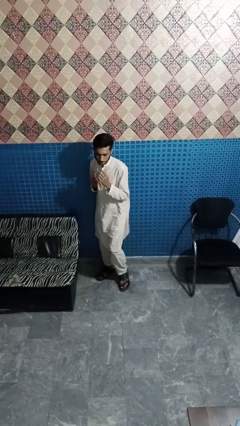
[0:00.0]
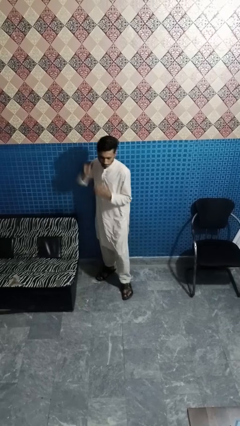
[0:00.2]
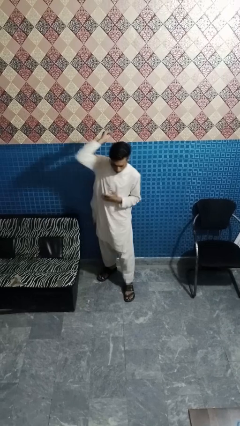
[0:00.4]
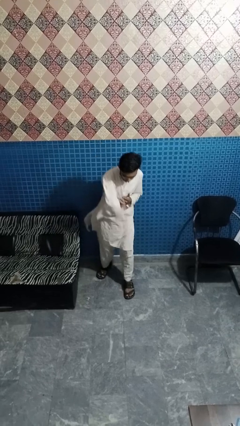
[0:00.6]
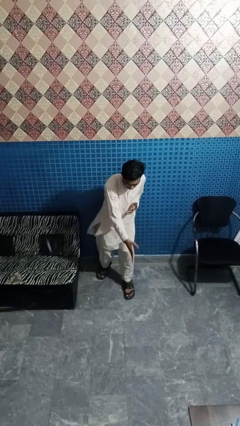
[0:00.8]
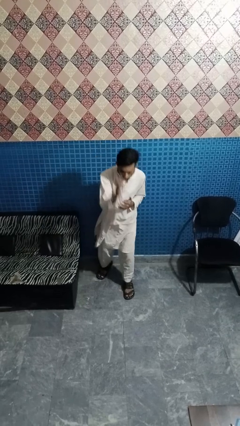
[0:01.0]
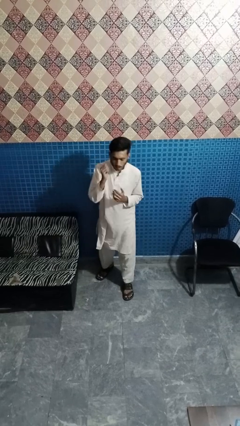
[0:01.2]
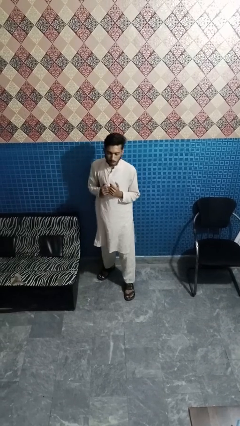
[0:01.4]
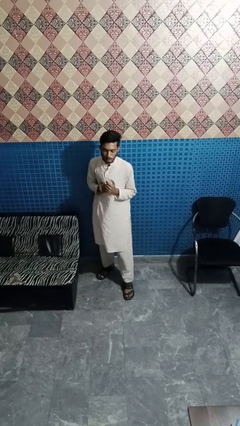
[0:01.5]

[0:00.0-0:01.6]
person karate chop

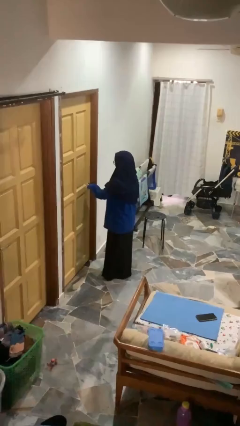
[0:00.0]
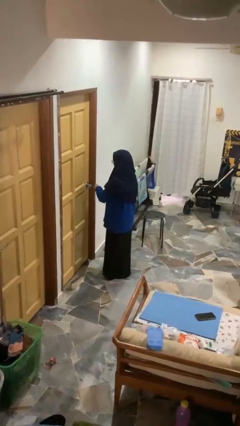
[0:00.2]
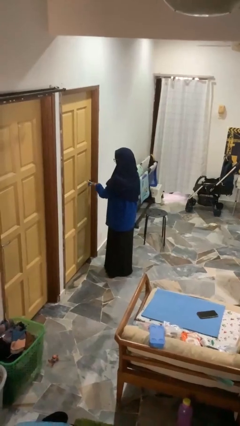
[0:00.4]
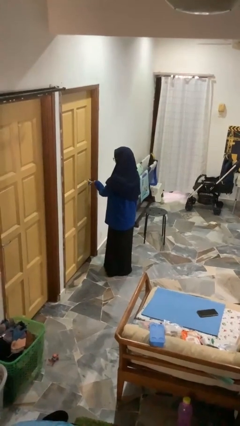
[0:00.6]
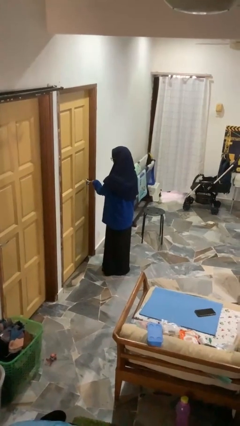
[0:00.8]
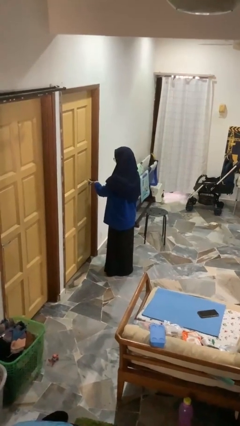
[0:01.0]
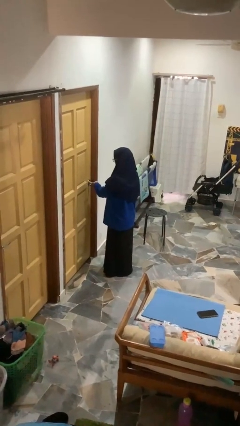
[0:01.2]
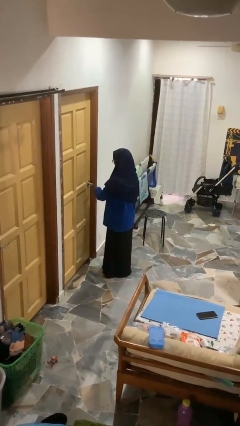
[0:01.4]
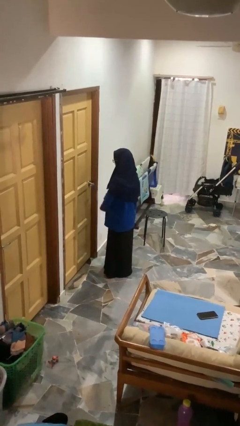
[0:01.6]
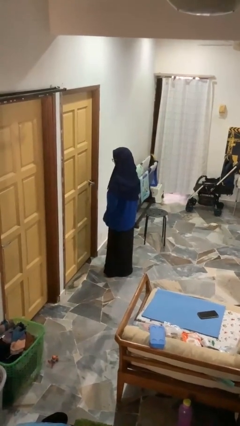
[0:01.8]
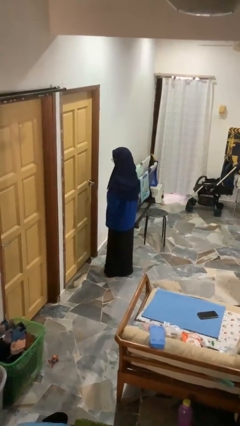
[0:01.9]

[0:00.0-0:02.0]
person locks door with keys

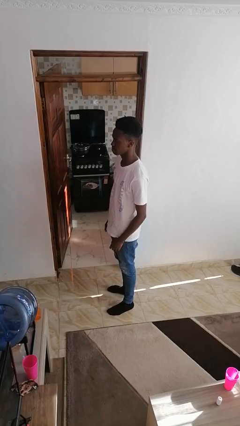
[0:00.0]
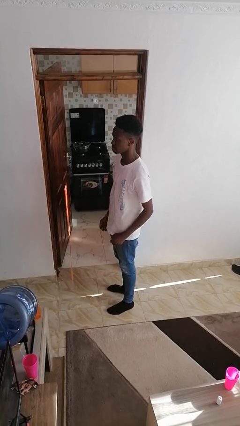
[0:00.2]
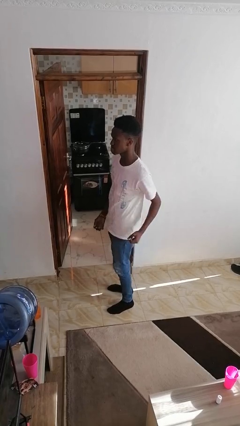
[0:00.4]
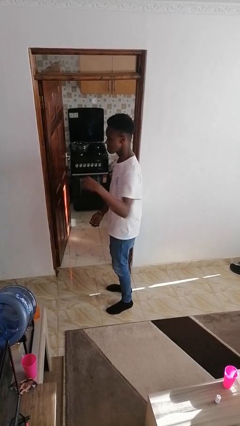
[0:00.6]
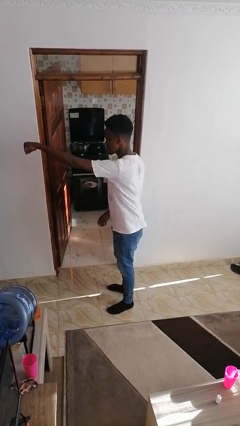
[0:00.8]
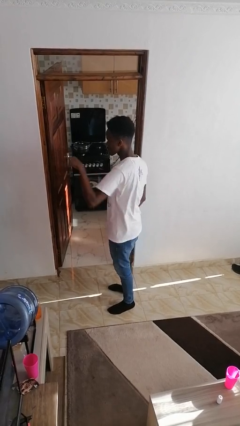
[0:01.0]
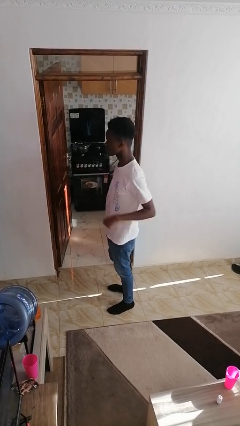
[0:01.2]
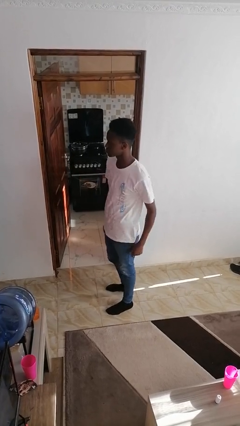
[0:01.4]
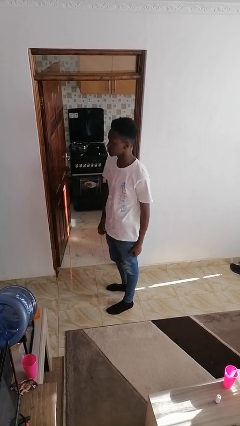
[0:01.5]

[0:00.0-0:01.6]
person punches

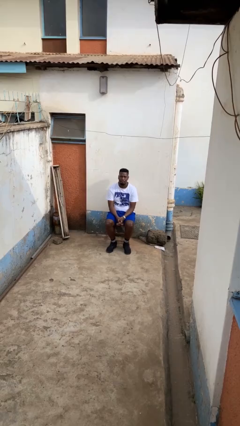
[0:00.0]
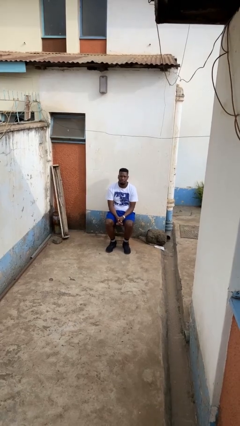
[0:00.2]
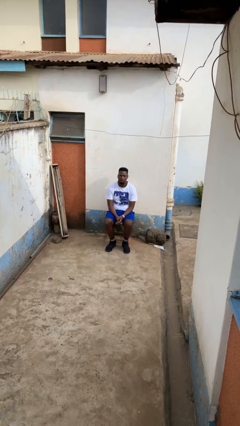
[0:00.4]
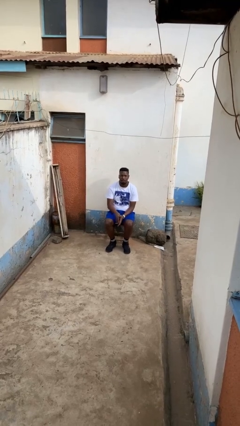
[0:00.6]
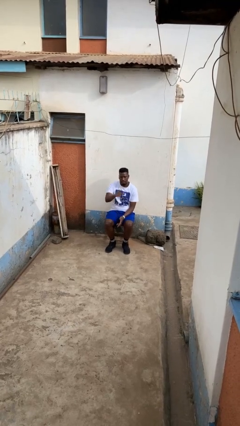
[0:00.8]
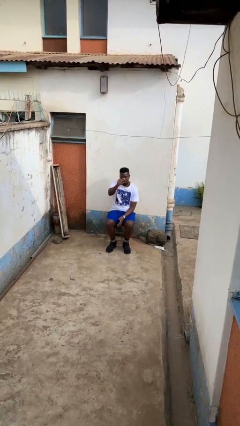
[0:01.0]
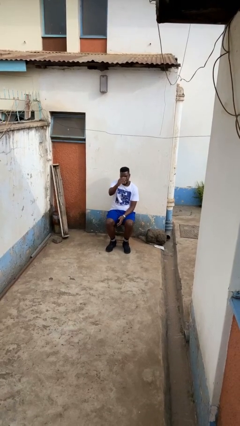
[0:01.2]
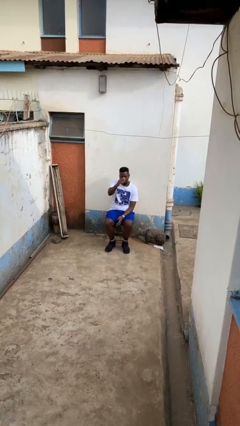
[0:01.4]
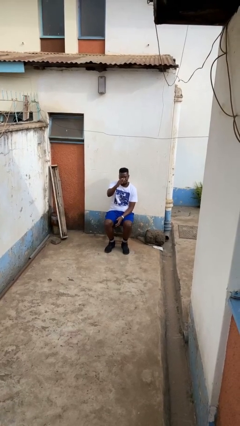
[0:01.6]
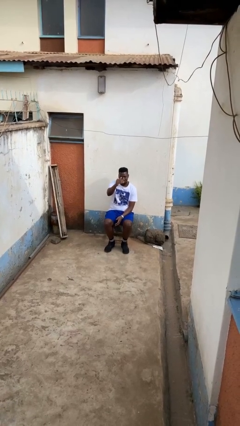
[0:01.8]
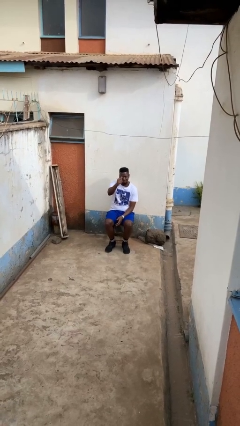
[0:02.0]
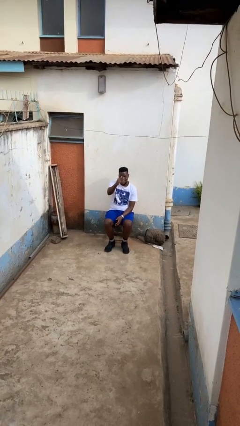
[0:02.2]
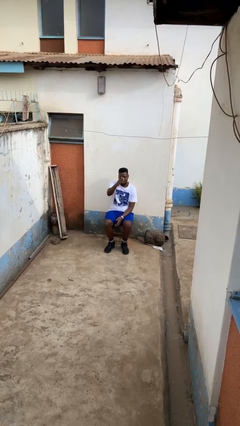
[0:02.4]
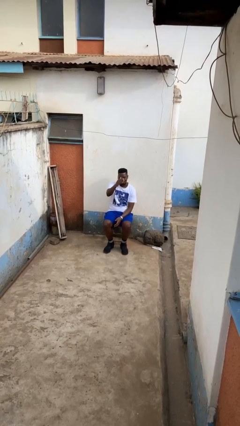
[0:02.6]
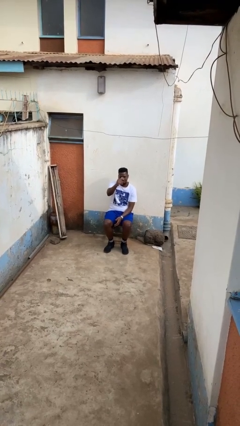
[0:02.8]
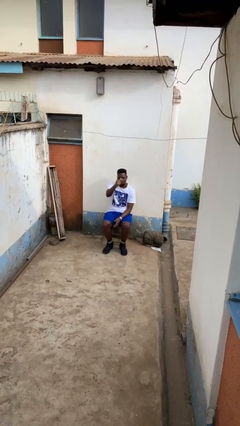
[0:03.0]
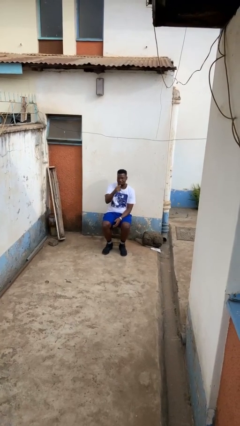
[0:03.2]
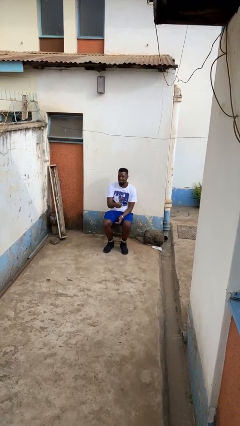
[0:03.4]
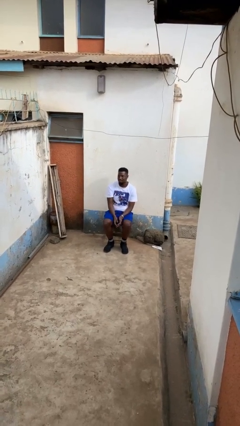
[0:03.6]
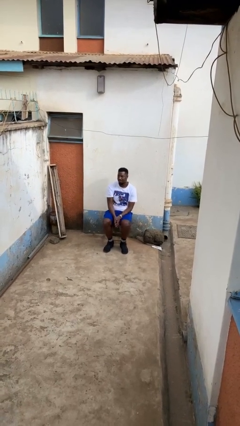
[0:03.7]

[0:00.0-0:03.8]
person gestures come here

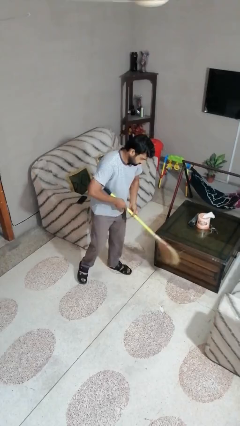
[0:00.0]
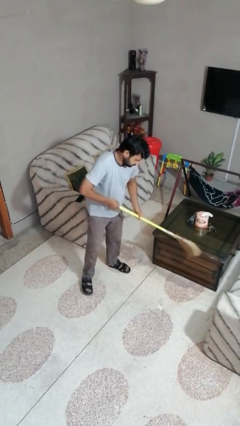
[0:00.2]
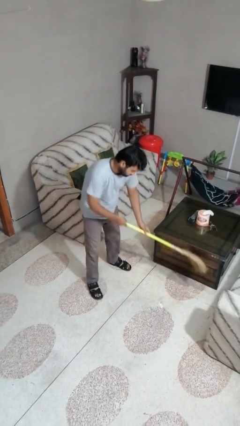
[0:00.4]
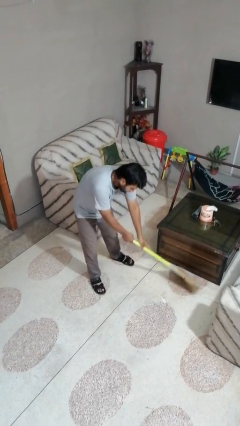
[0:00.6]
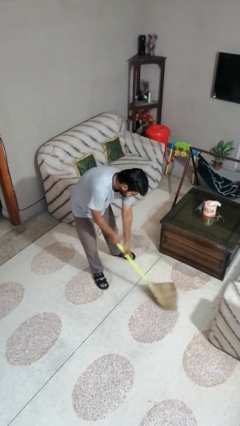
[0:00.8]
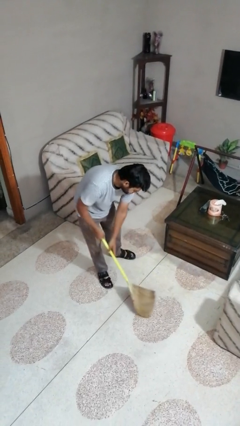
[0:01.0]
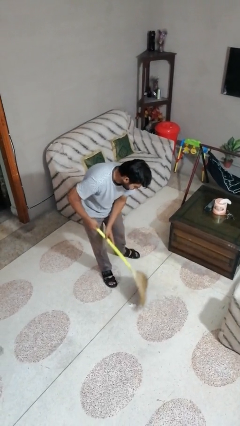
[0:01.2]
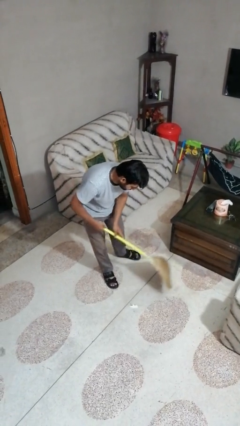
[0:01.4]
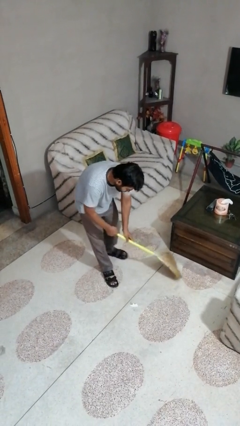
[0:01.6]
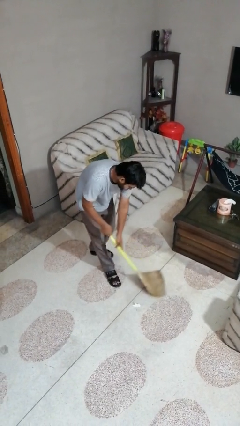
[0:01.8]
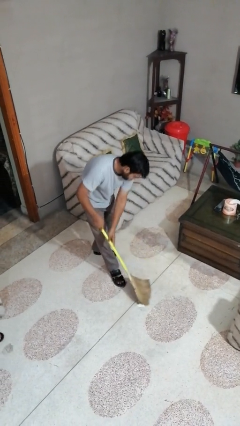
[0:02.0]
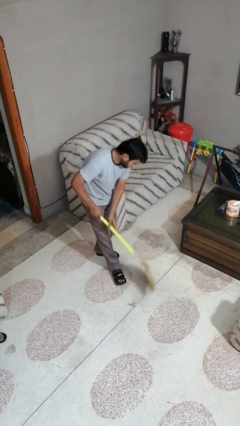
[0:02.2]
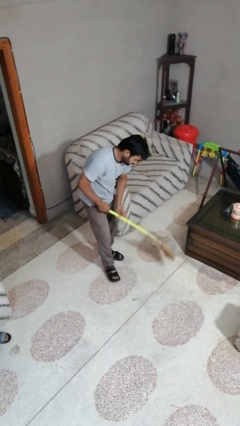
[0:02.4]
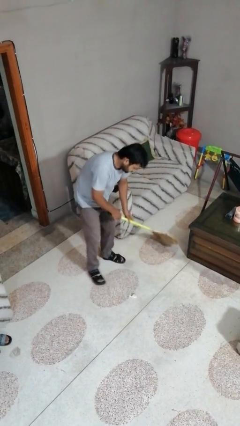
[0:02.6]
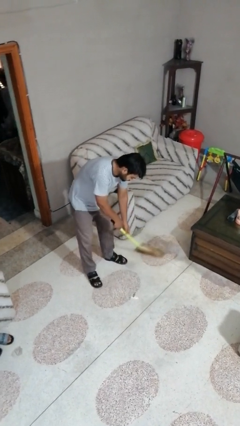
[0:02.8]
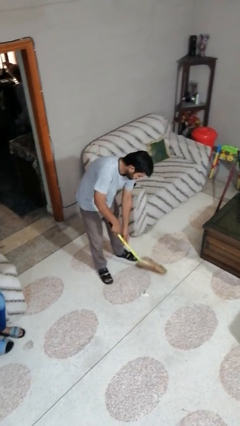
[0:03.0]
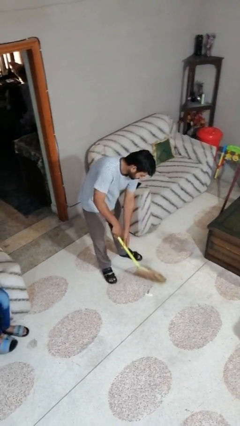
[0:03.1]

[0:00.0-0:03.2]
person sweeps floor

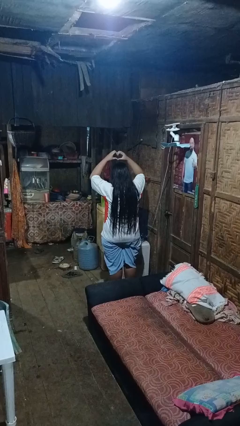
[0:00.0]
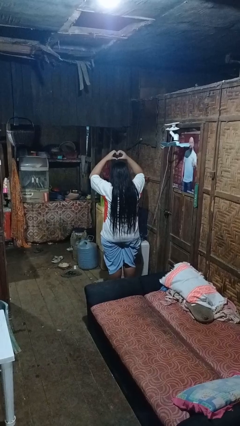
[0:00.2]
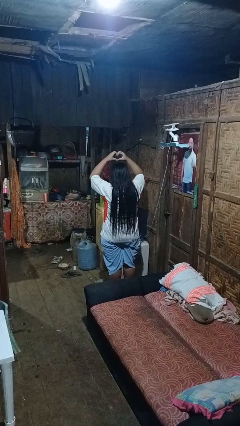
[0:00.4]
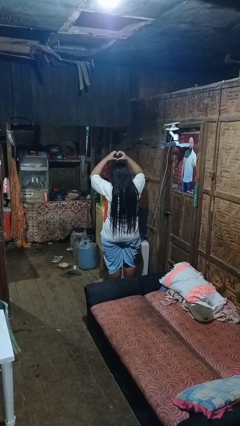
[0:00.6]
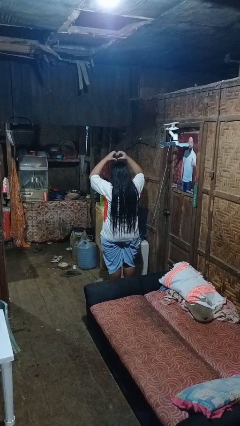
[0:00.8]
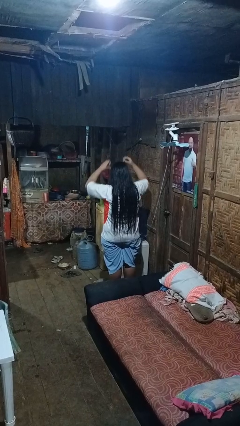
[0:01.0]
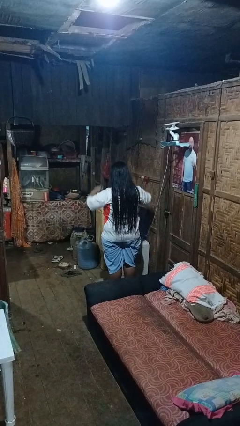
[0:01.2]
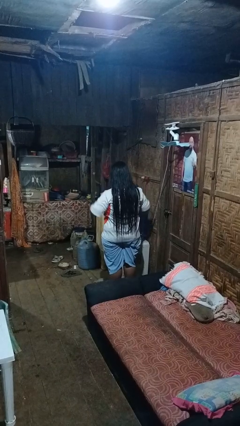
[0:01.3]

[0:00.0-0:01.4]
person gestures heart

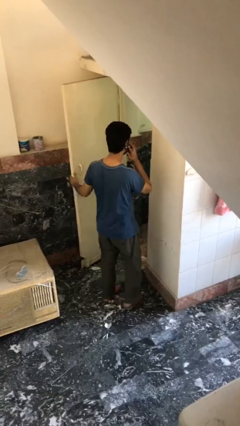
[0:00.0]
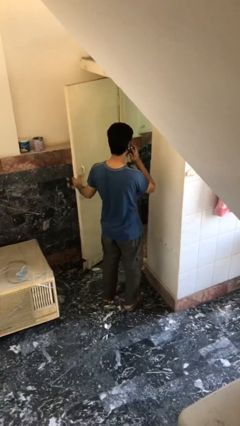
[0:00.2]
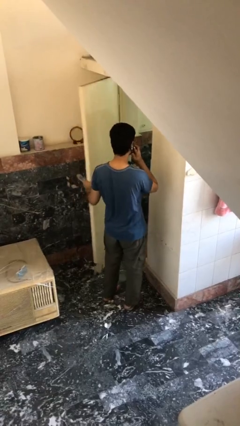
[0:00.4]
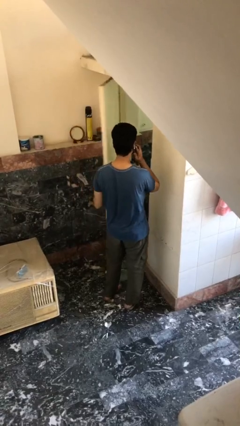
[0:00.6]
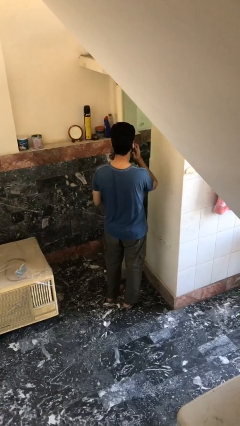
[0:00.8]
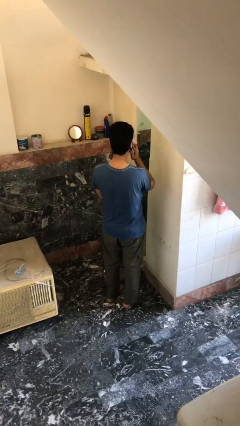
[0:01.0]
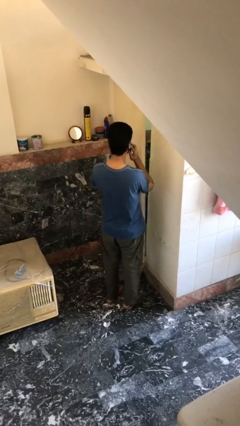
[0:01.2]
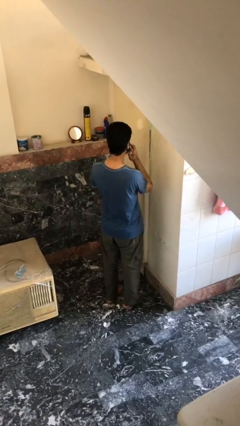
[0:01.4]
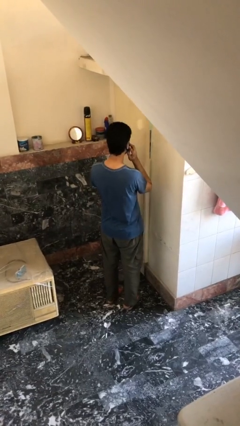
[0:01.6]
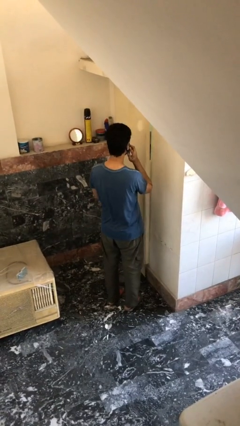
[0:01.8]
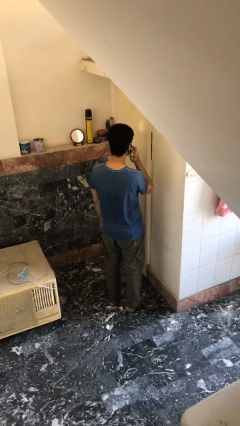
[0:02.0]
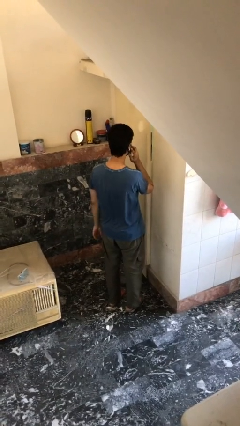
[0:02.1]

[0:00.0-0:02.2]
person closes facility door

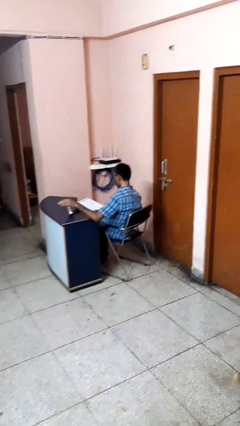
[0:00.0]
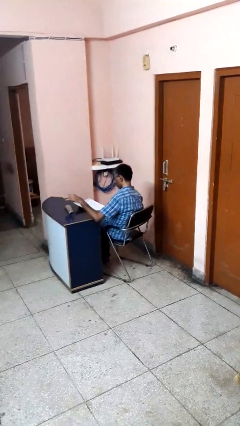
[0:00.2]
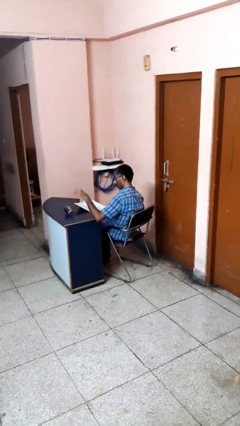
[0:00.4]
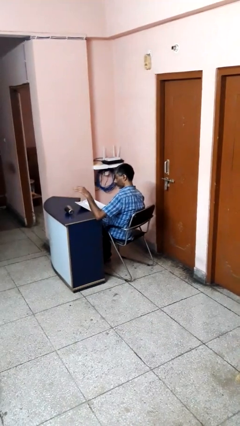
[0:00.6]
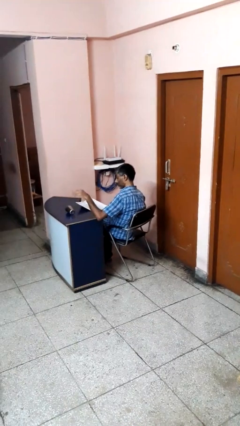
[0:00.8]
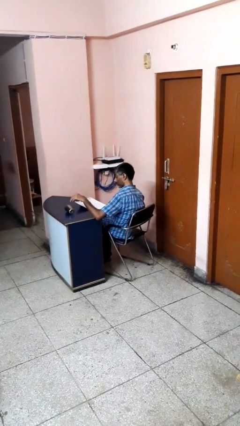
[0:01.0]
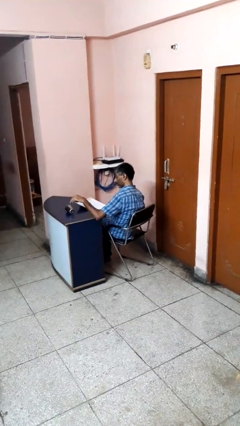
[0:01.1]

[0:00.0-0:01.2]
person knocks over glass
